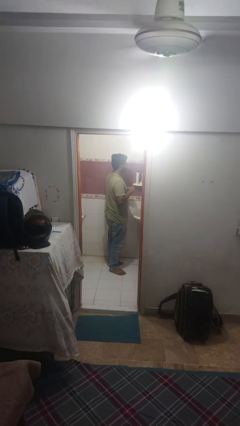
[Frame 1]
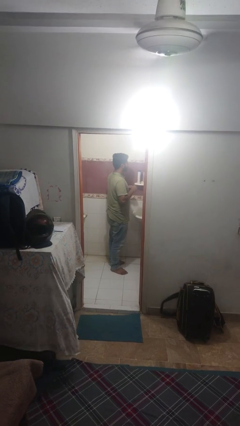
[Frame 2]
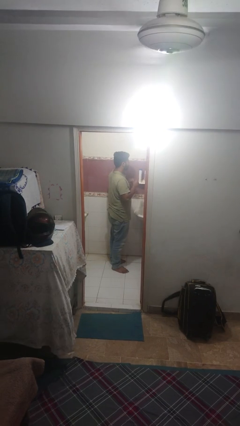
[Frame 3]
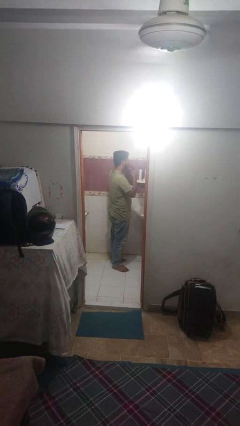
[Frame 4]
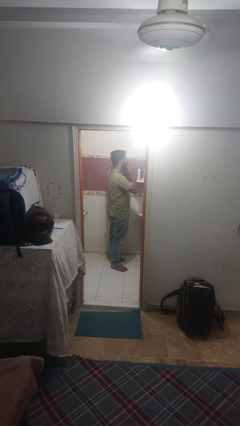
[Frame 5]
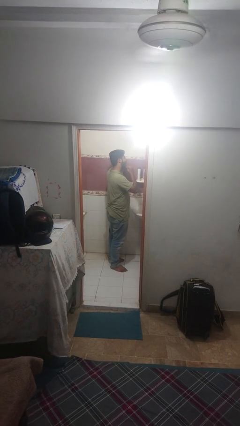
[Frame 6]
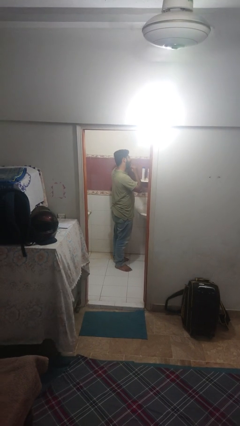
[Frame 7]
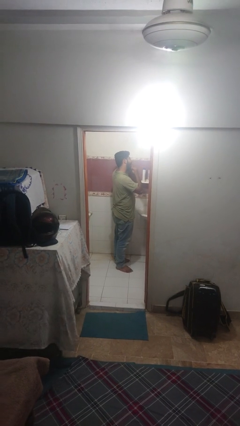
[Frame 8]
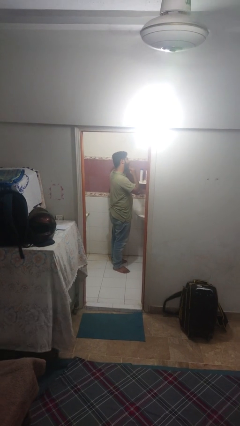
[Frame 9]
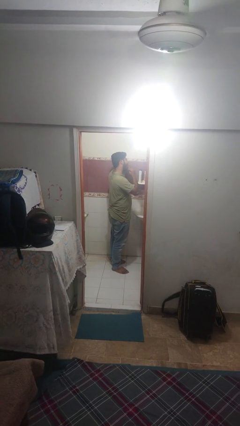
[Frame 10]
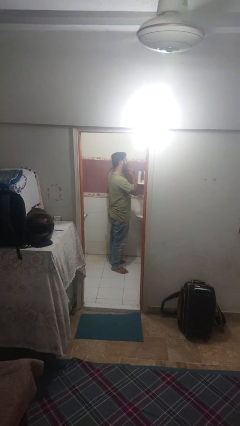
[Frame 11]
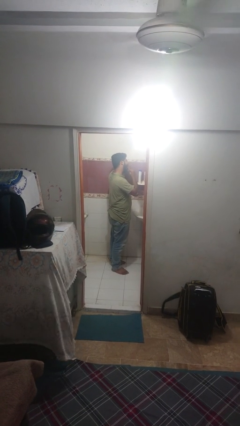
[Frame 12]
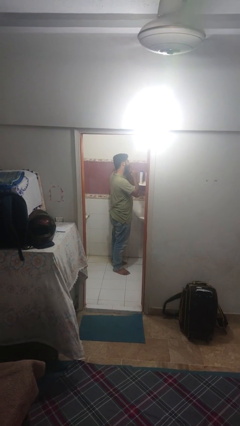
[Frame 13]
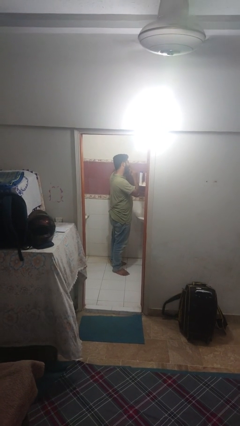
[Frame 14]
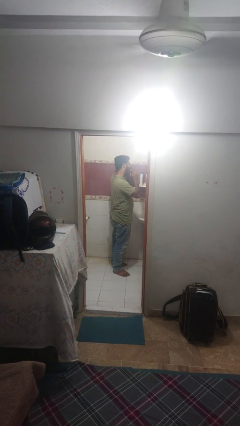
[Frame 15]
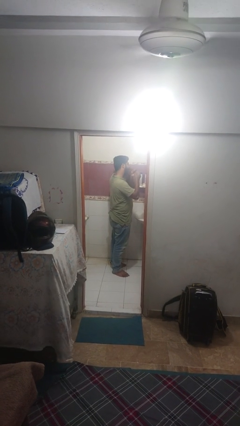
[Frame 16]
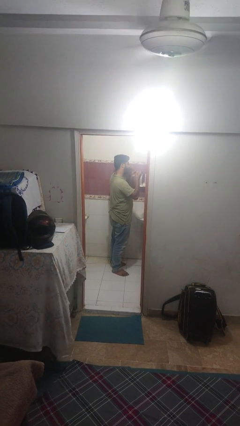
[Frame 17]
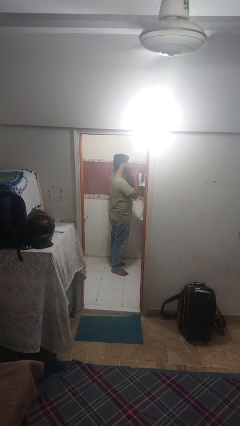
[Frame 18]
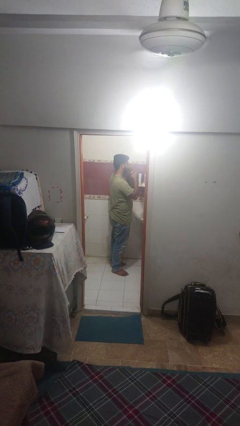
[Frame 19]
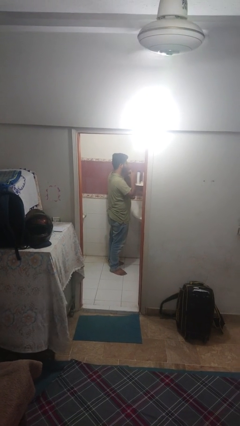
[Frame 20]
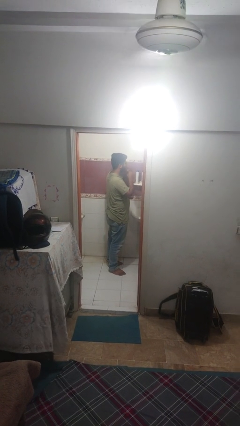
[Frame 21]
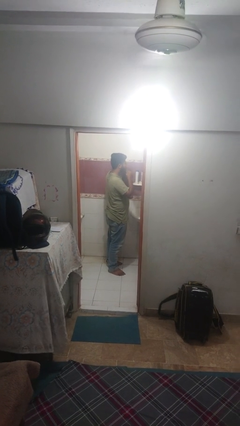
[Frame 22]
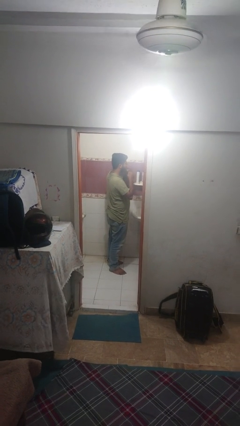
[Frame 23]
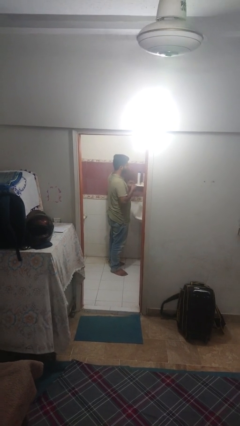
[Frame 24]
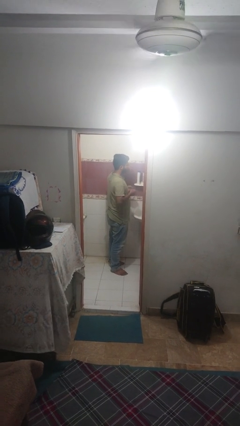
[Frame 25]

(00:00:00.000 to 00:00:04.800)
person flosses

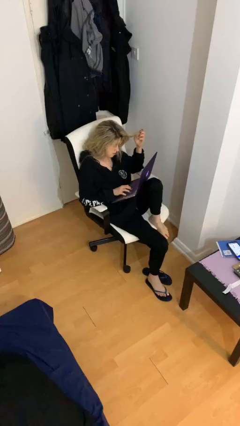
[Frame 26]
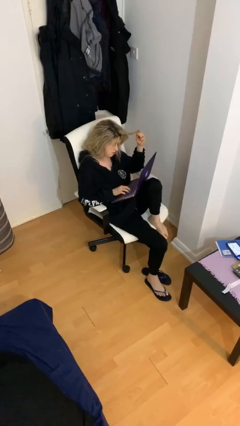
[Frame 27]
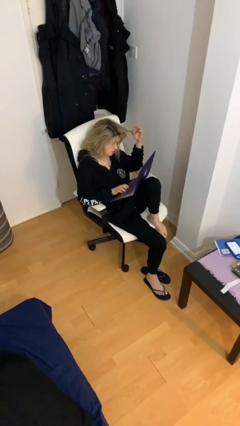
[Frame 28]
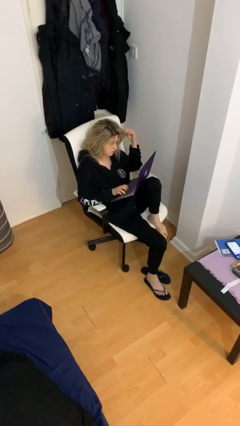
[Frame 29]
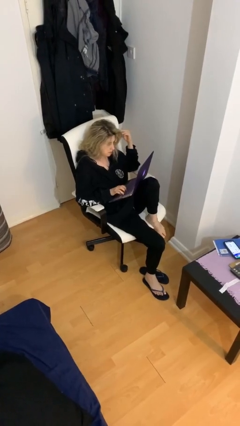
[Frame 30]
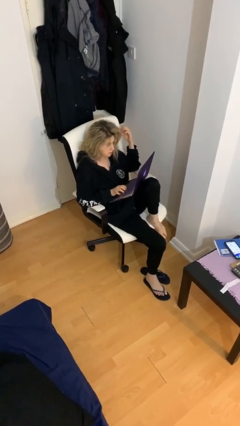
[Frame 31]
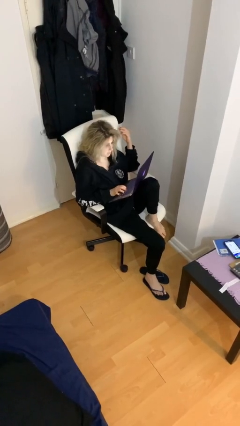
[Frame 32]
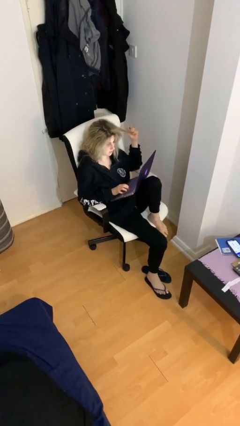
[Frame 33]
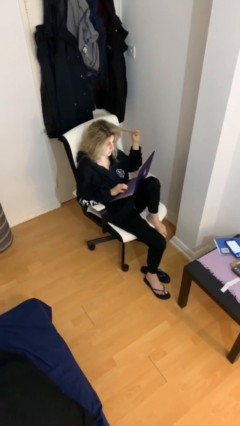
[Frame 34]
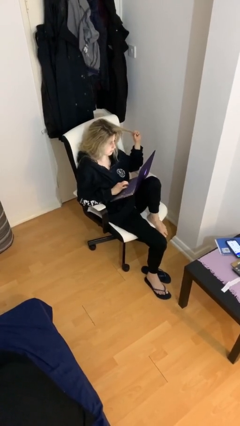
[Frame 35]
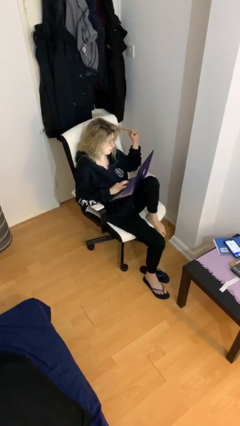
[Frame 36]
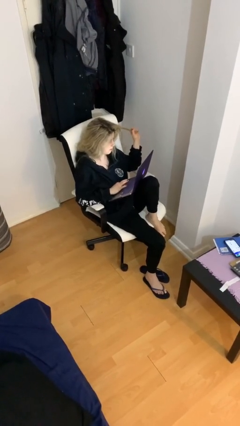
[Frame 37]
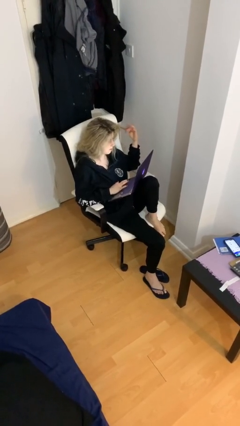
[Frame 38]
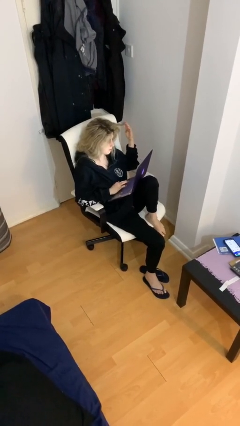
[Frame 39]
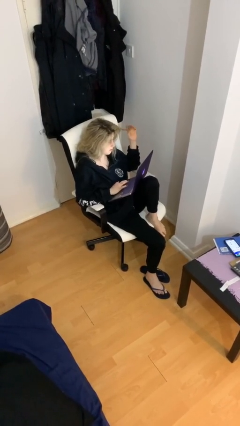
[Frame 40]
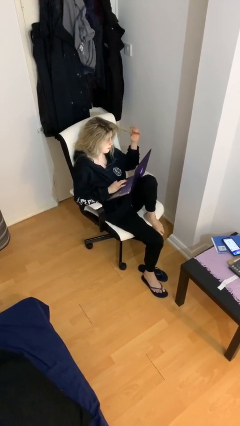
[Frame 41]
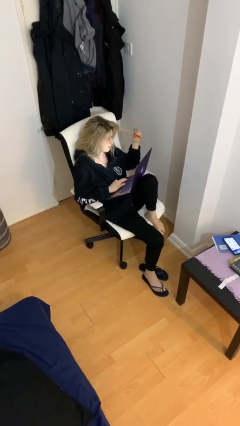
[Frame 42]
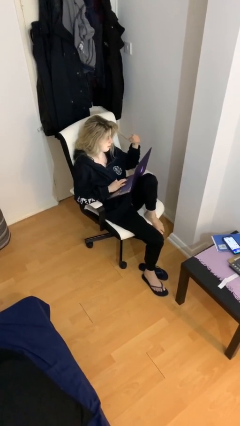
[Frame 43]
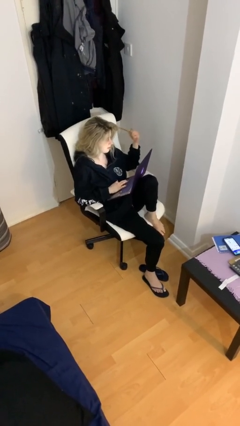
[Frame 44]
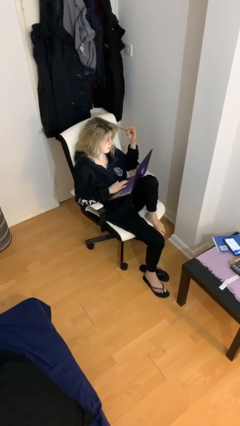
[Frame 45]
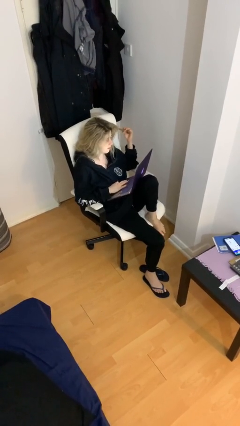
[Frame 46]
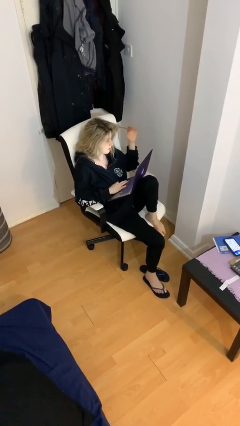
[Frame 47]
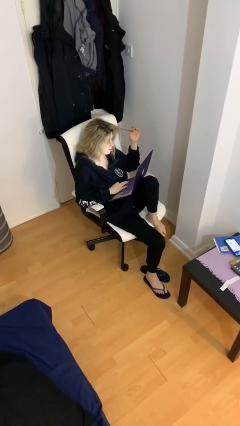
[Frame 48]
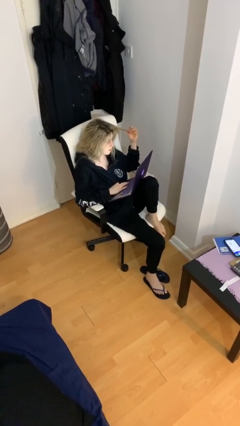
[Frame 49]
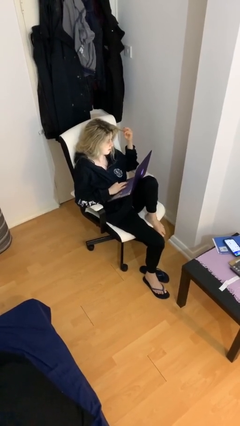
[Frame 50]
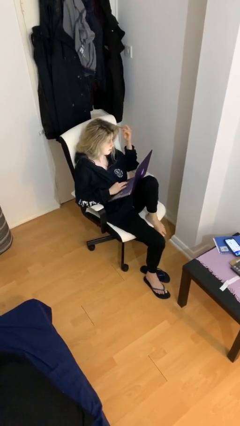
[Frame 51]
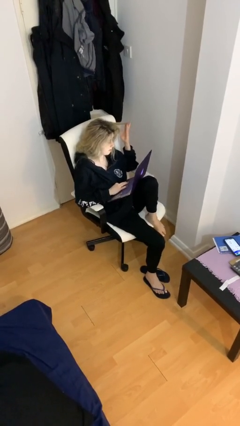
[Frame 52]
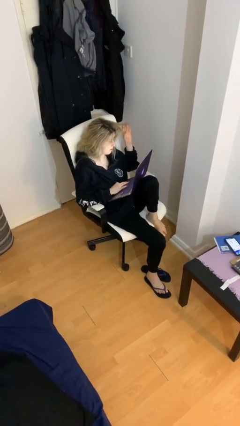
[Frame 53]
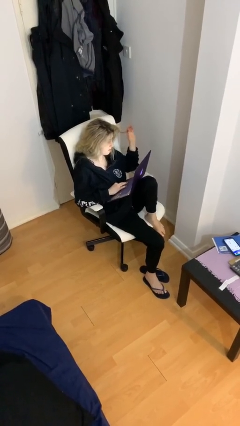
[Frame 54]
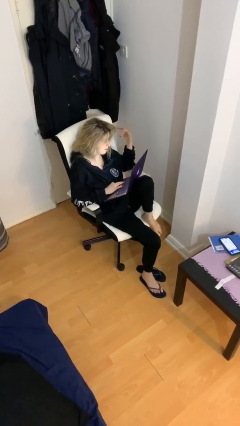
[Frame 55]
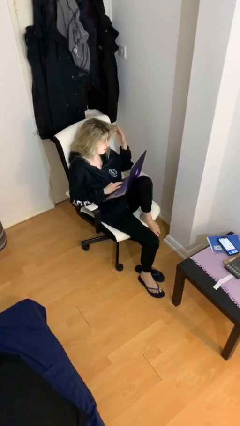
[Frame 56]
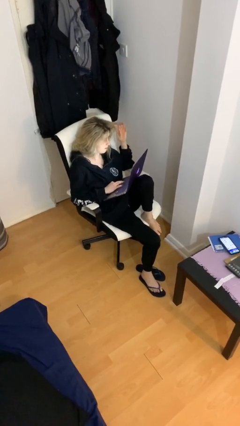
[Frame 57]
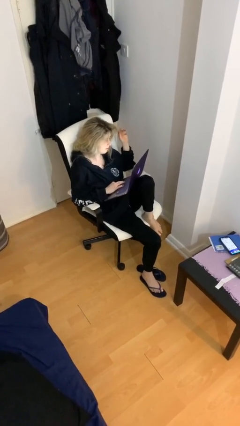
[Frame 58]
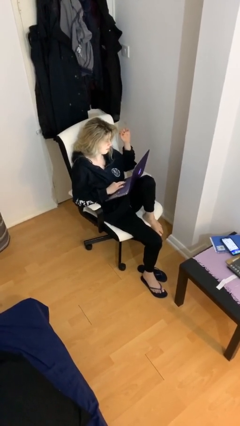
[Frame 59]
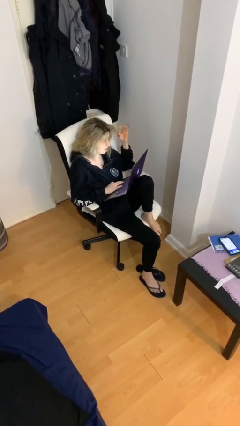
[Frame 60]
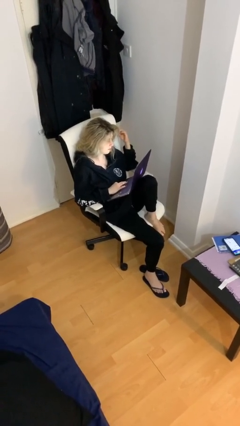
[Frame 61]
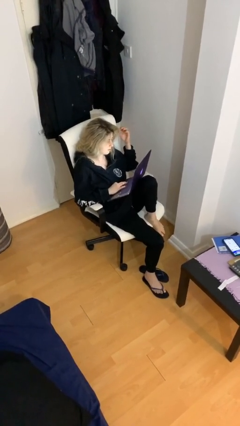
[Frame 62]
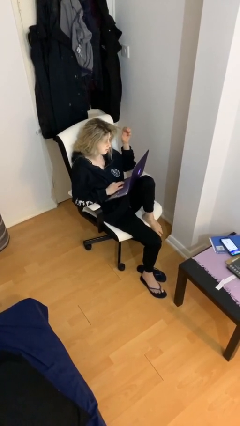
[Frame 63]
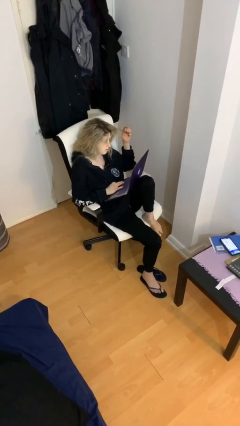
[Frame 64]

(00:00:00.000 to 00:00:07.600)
person interacts with laptop

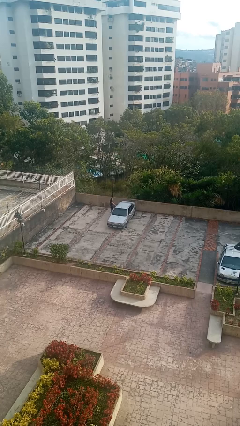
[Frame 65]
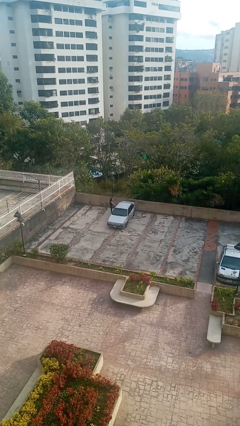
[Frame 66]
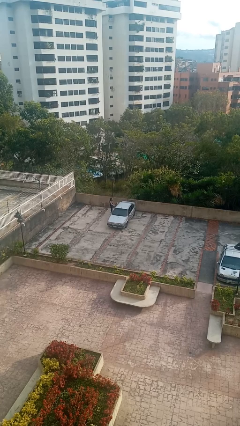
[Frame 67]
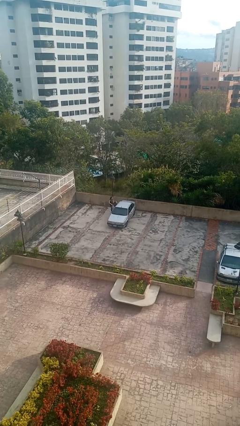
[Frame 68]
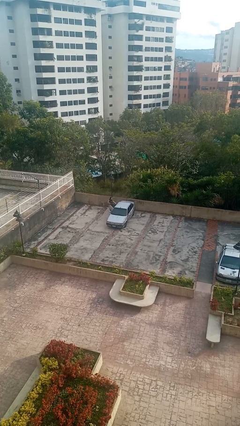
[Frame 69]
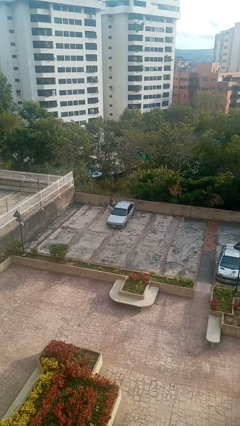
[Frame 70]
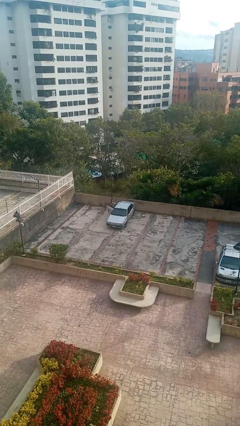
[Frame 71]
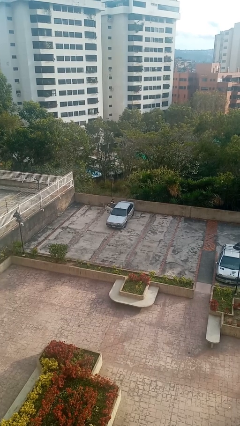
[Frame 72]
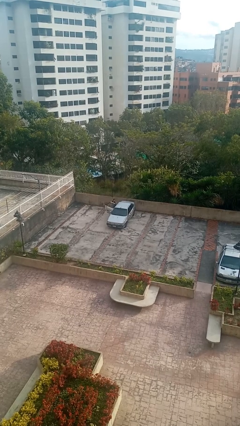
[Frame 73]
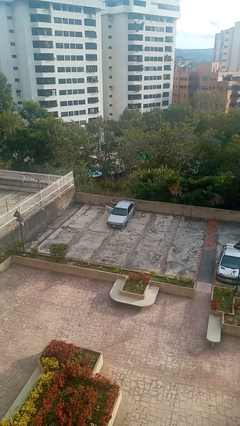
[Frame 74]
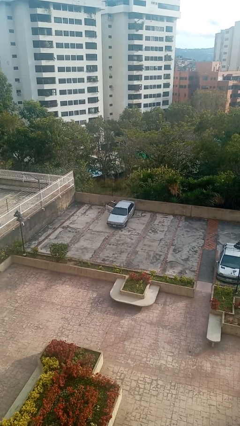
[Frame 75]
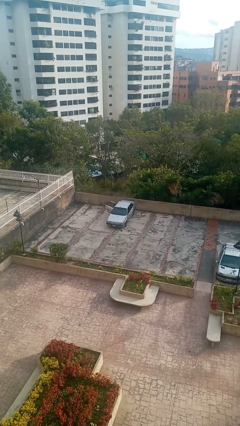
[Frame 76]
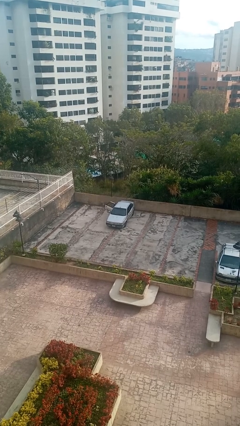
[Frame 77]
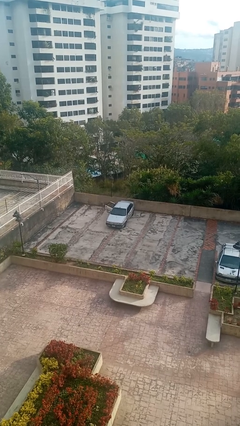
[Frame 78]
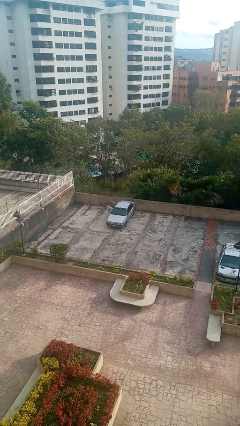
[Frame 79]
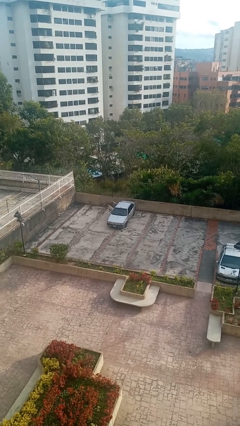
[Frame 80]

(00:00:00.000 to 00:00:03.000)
car picks up person

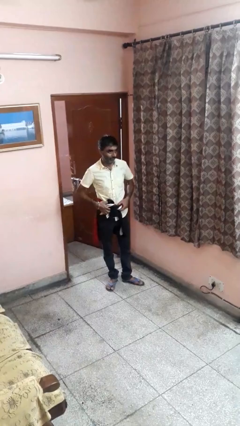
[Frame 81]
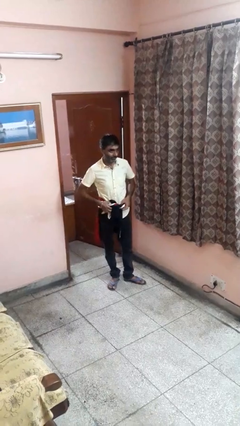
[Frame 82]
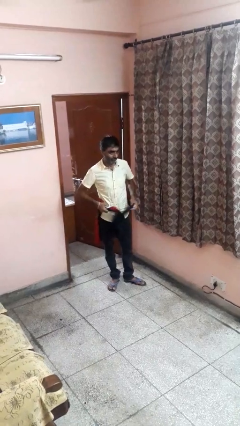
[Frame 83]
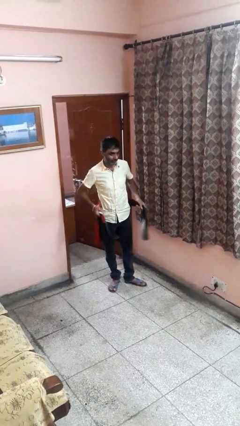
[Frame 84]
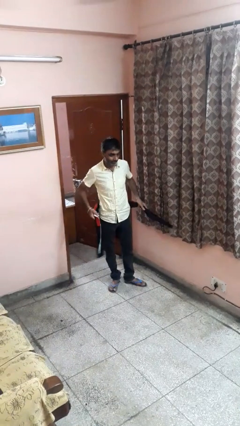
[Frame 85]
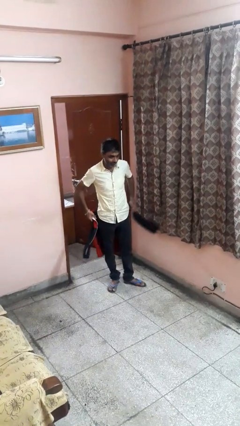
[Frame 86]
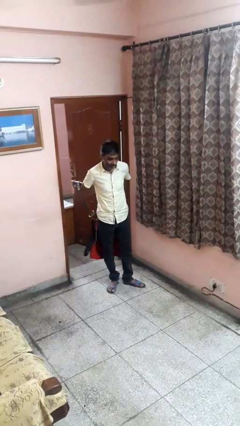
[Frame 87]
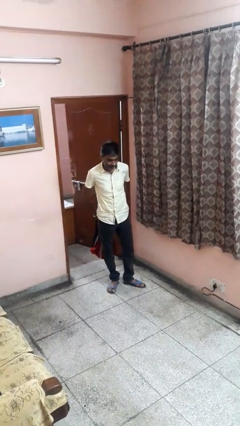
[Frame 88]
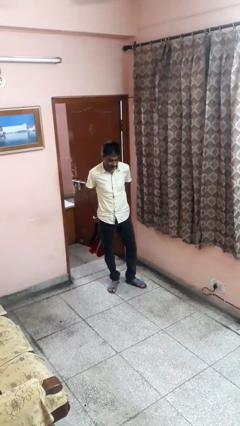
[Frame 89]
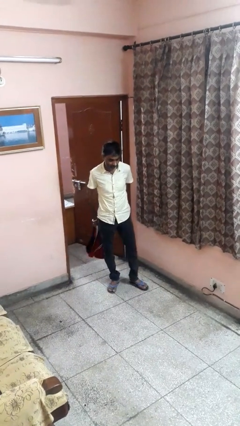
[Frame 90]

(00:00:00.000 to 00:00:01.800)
person unties jacket around waist

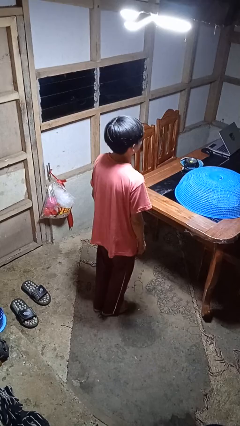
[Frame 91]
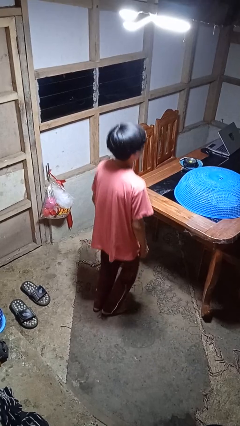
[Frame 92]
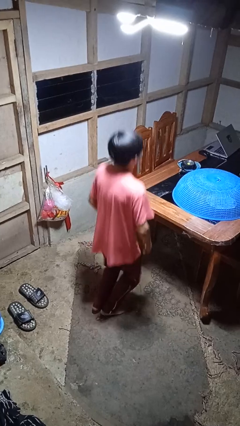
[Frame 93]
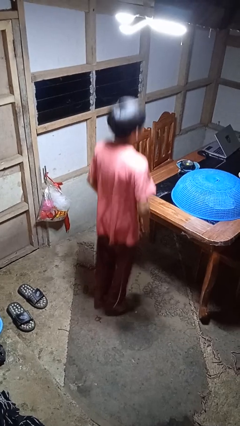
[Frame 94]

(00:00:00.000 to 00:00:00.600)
person jumps
